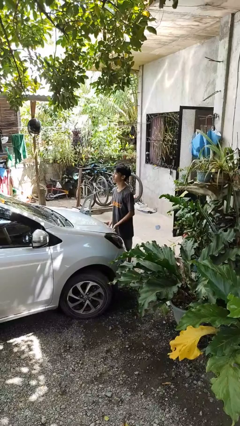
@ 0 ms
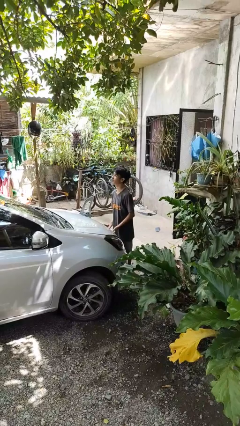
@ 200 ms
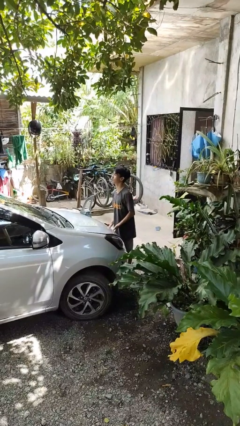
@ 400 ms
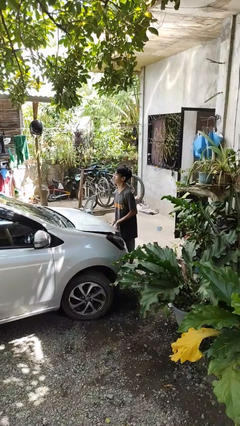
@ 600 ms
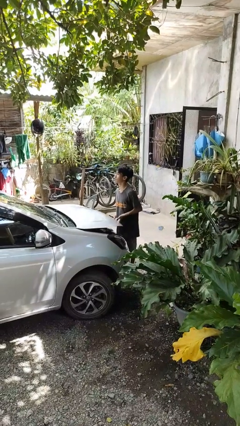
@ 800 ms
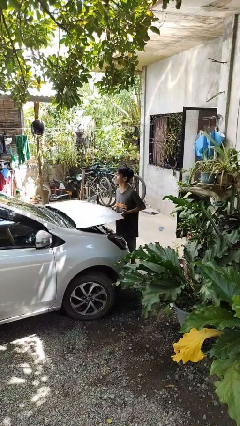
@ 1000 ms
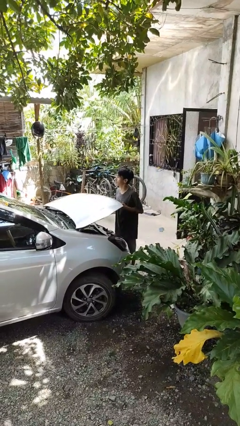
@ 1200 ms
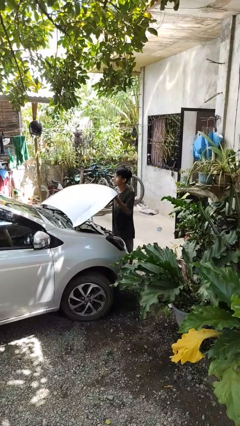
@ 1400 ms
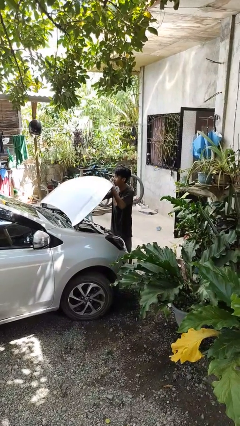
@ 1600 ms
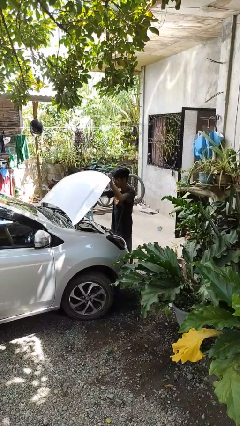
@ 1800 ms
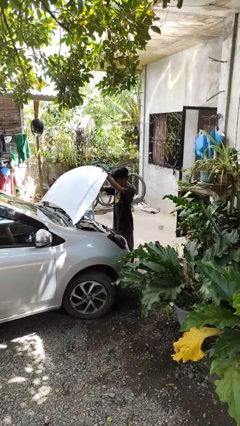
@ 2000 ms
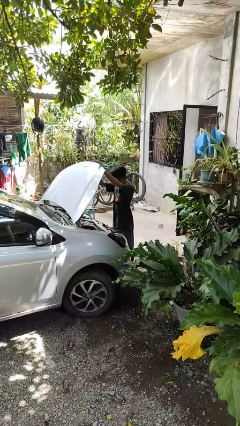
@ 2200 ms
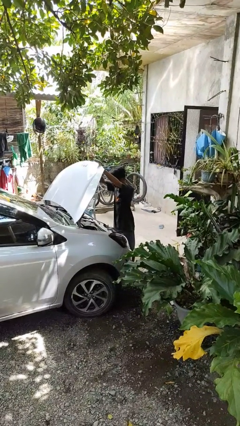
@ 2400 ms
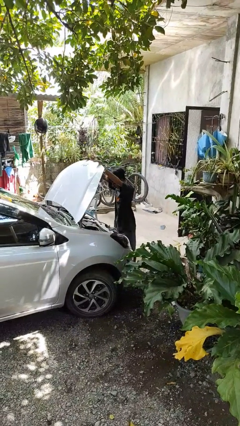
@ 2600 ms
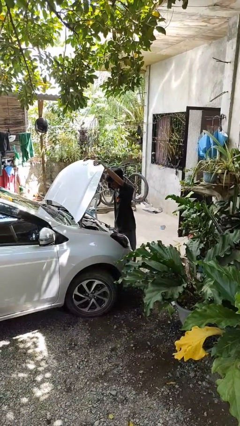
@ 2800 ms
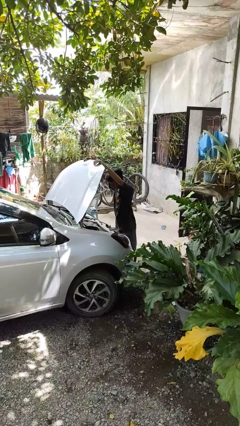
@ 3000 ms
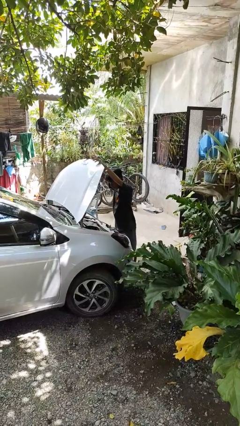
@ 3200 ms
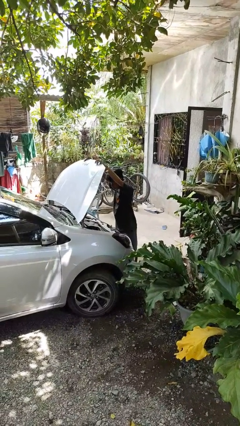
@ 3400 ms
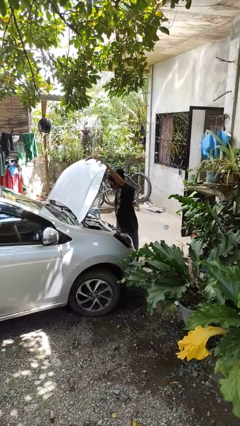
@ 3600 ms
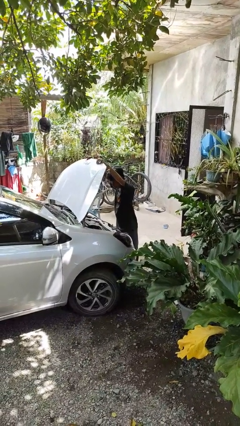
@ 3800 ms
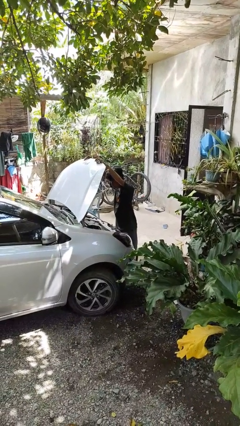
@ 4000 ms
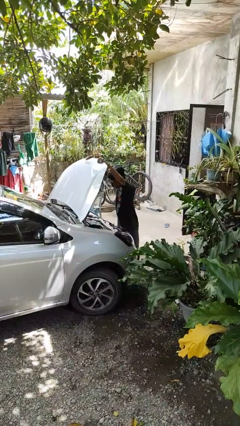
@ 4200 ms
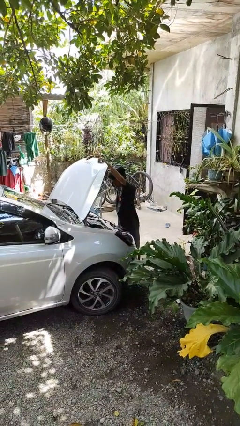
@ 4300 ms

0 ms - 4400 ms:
person opens car hood

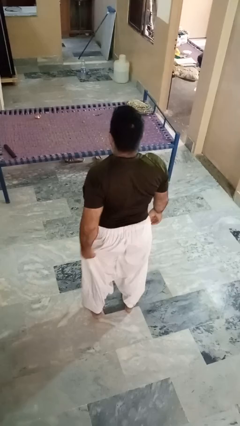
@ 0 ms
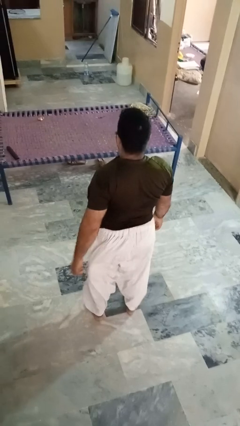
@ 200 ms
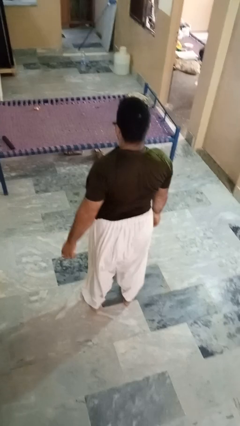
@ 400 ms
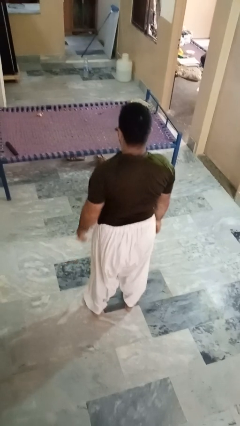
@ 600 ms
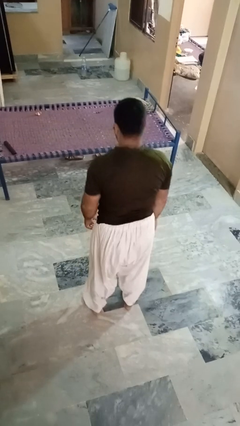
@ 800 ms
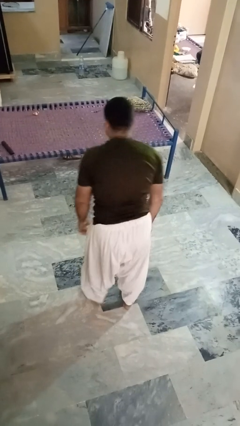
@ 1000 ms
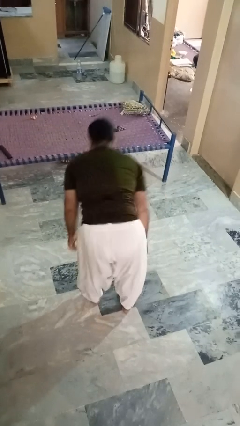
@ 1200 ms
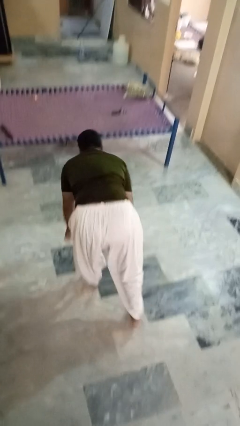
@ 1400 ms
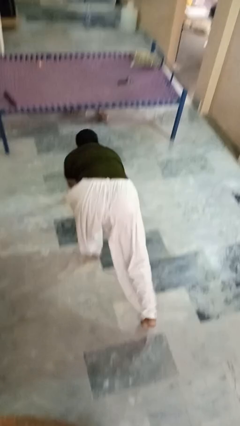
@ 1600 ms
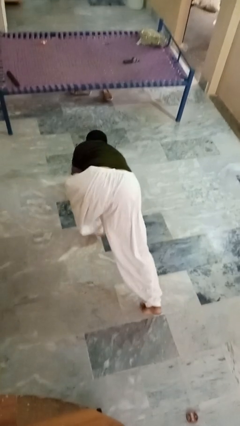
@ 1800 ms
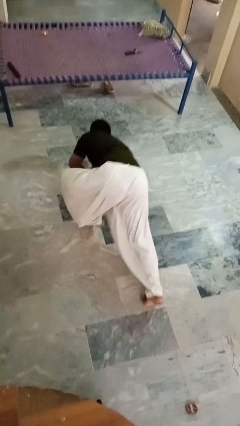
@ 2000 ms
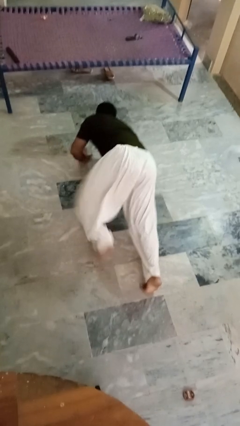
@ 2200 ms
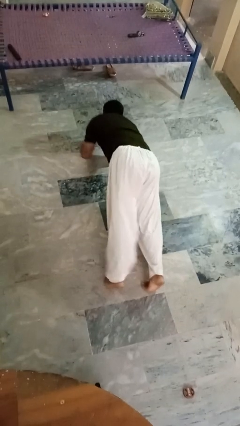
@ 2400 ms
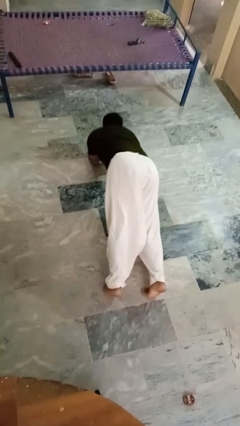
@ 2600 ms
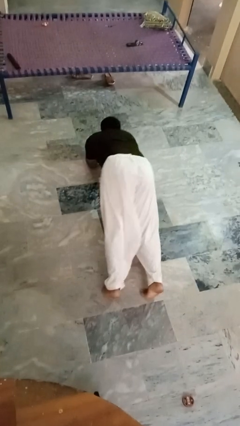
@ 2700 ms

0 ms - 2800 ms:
person exercises with plank

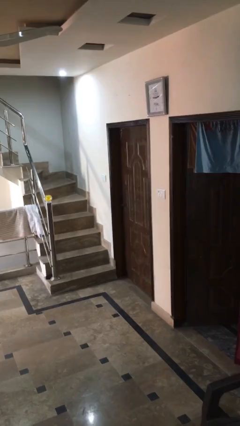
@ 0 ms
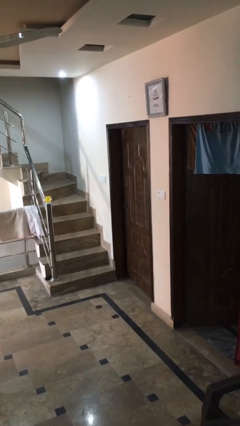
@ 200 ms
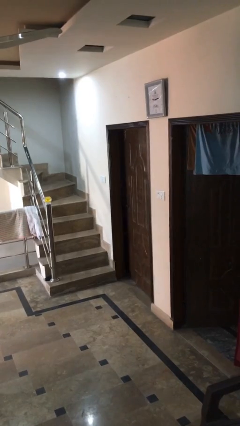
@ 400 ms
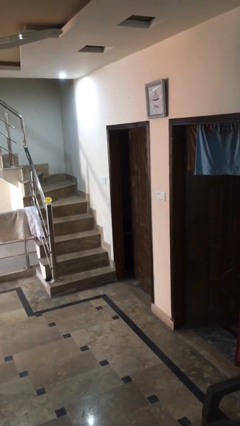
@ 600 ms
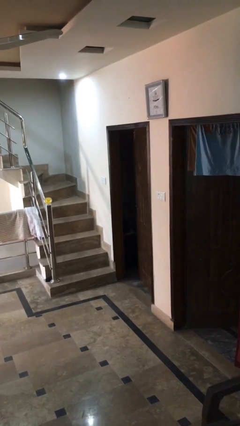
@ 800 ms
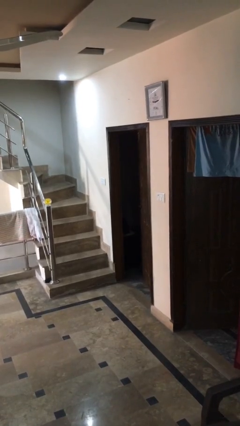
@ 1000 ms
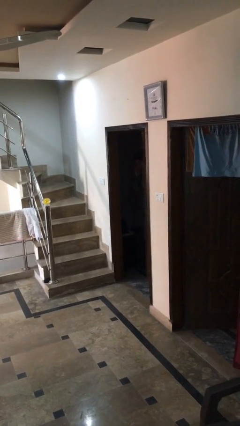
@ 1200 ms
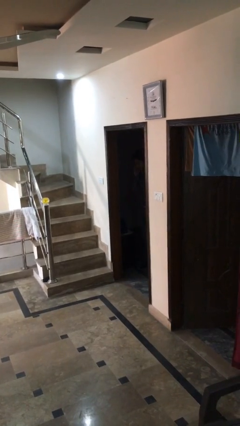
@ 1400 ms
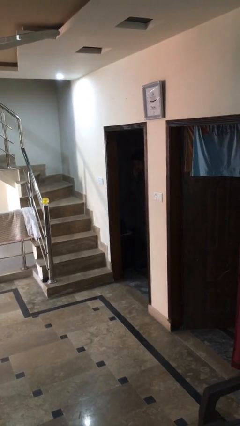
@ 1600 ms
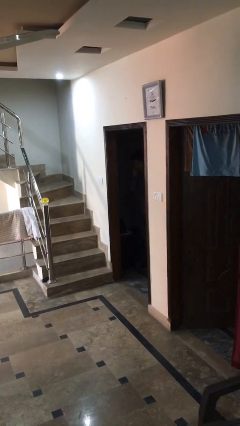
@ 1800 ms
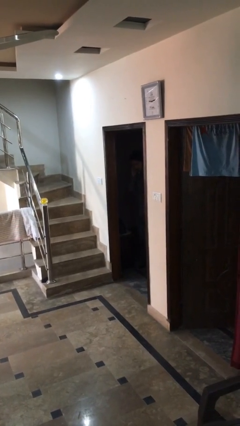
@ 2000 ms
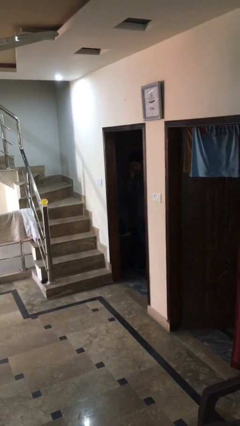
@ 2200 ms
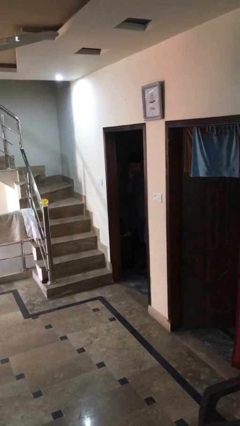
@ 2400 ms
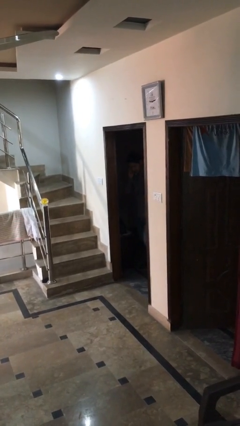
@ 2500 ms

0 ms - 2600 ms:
person opens facility door

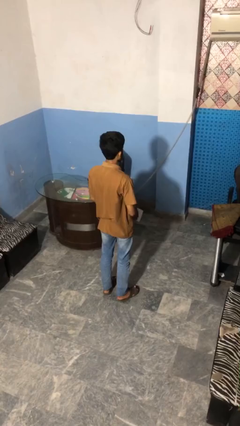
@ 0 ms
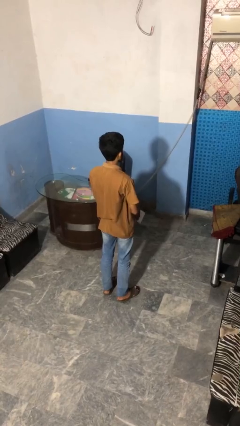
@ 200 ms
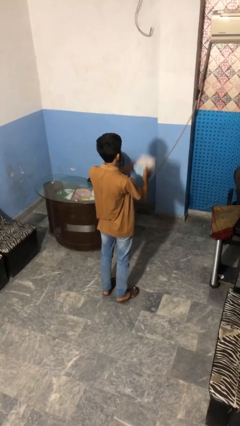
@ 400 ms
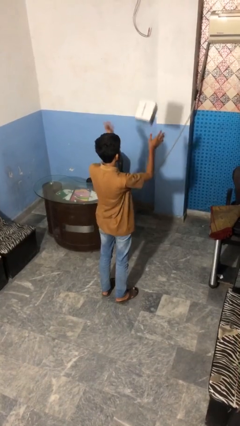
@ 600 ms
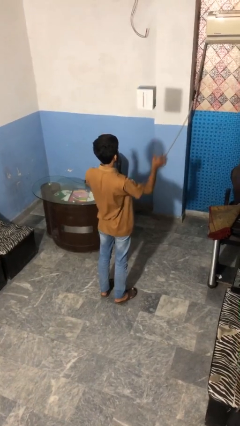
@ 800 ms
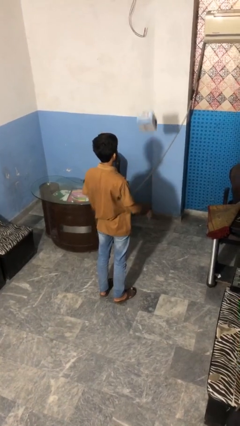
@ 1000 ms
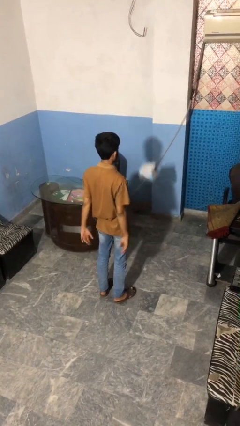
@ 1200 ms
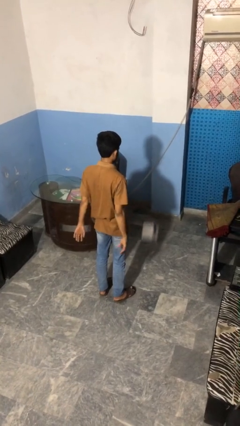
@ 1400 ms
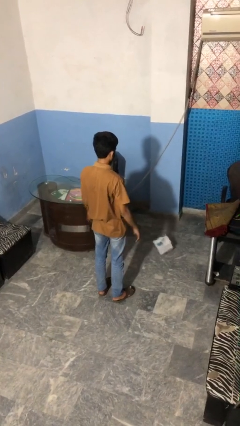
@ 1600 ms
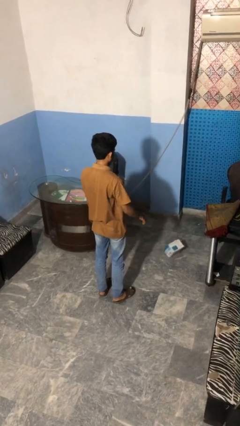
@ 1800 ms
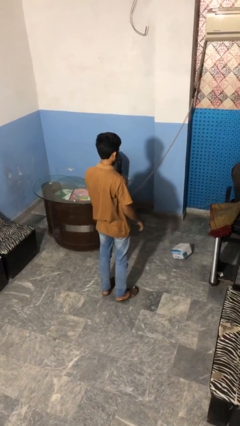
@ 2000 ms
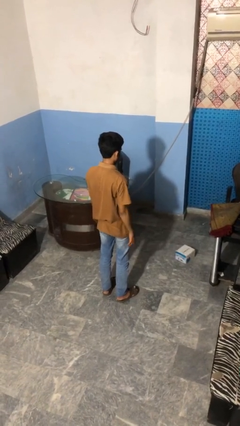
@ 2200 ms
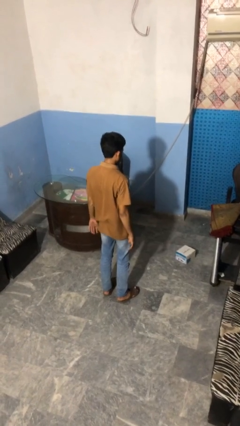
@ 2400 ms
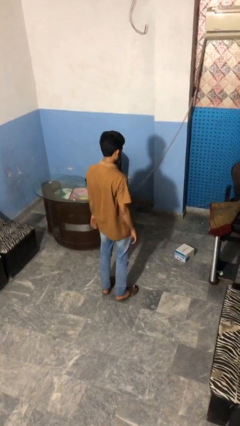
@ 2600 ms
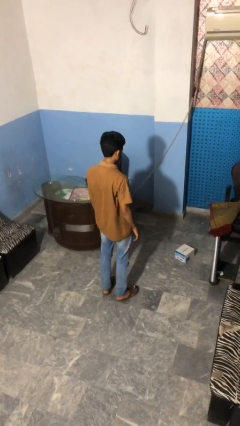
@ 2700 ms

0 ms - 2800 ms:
person throws object into air

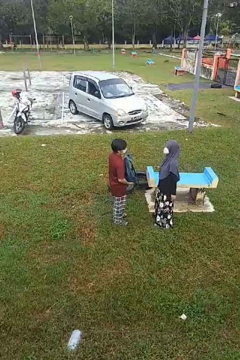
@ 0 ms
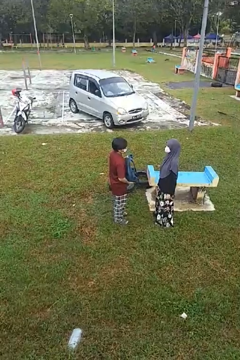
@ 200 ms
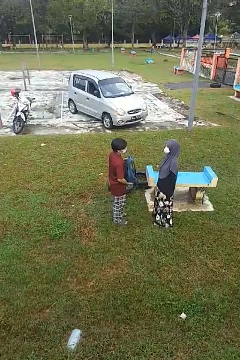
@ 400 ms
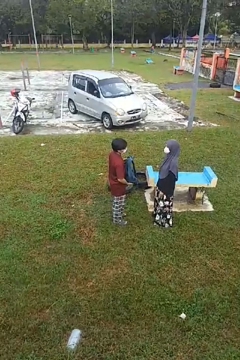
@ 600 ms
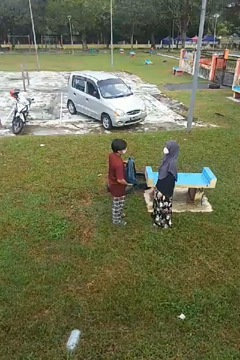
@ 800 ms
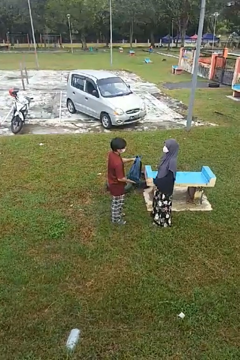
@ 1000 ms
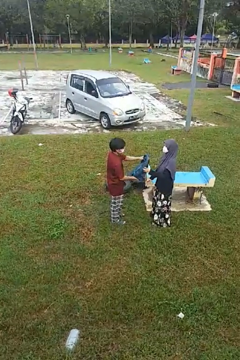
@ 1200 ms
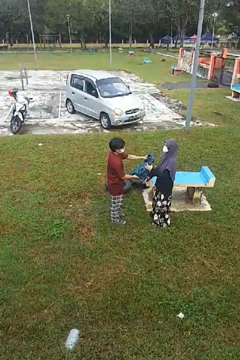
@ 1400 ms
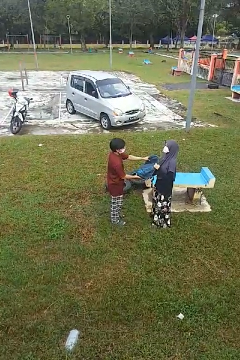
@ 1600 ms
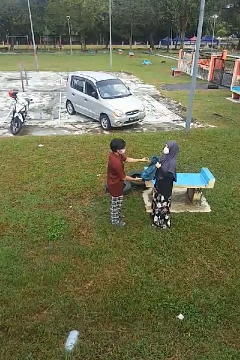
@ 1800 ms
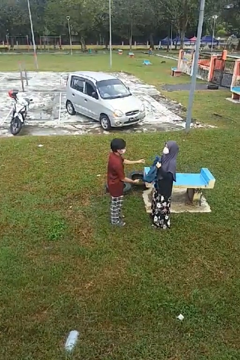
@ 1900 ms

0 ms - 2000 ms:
person transfers object to person

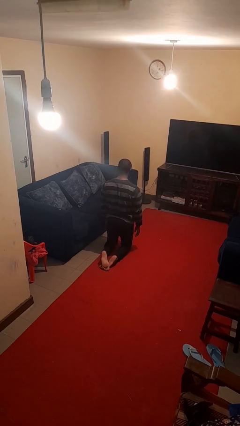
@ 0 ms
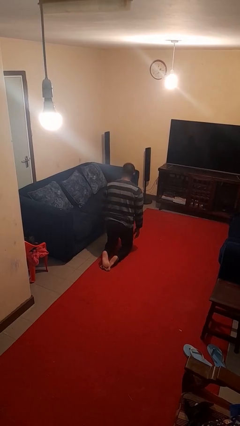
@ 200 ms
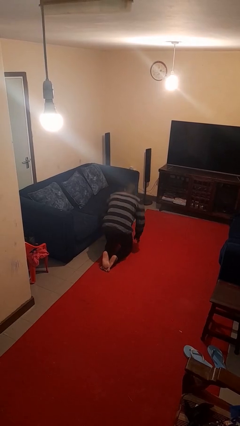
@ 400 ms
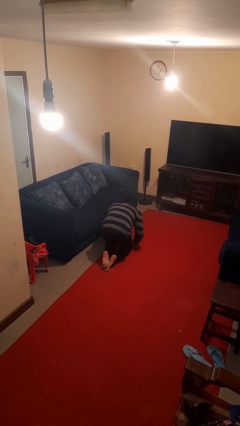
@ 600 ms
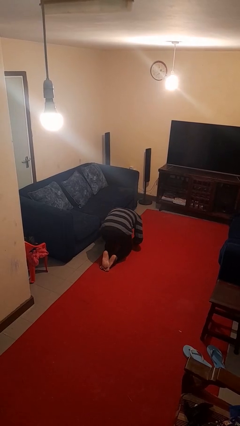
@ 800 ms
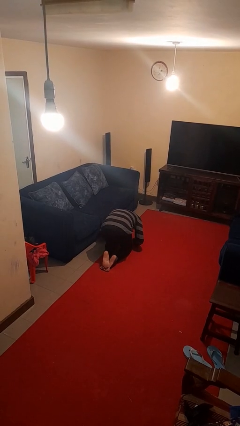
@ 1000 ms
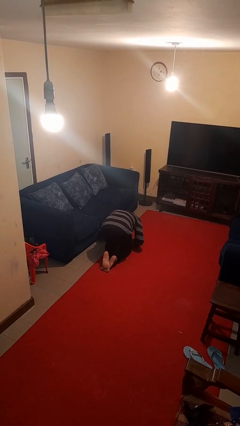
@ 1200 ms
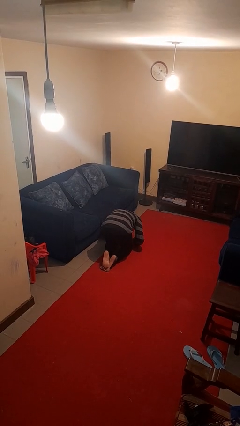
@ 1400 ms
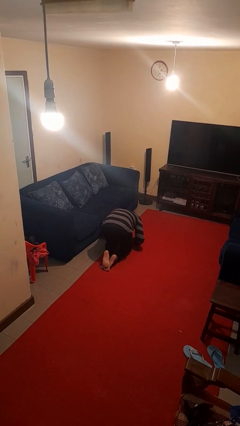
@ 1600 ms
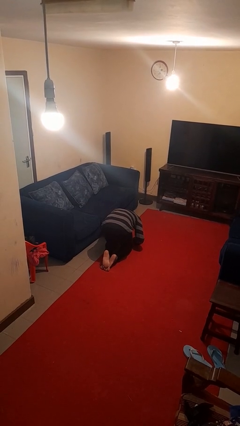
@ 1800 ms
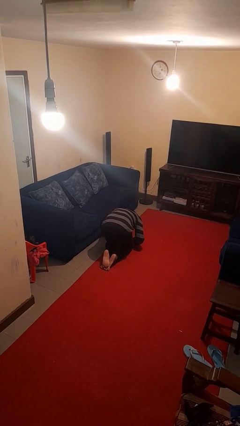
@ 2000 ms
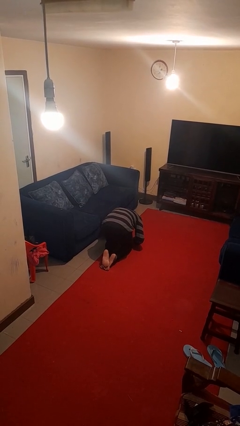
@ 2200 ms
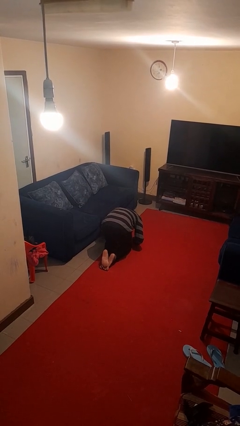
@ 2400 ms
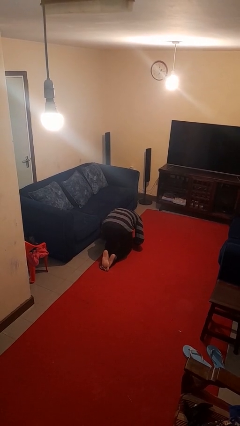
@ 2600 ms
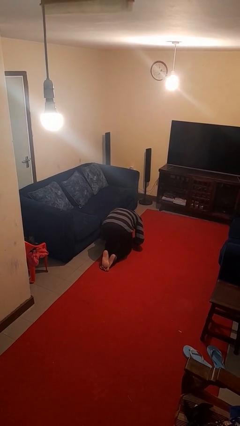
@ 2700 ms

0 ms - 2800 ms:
person searches under couch

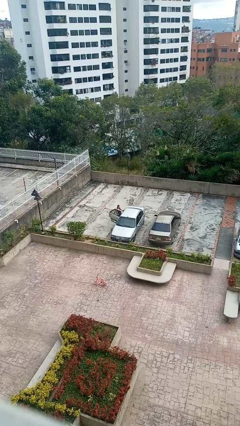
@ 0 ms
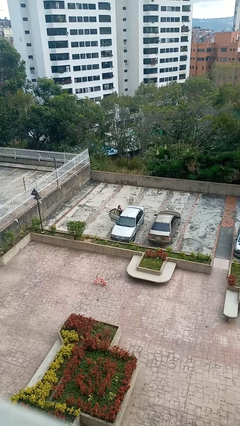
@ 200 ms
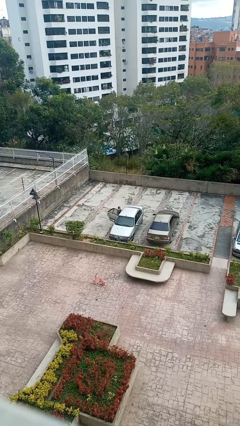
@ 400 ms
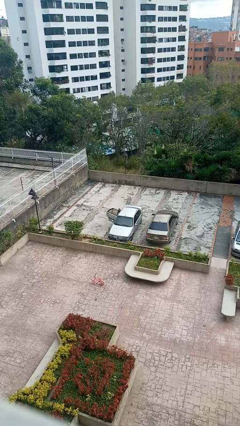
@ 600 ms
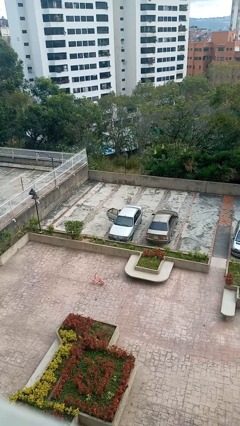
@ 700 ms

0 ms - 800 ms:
person enters car
